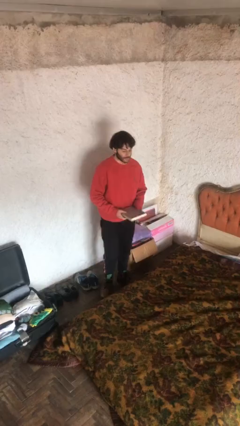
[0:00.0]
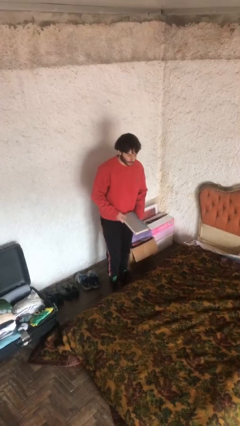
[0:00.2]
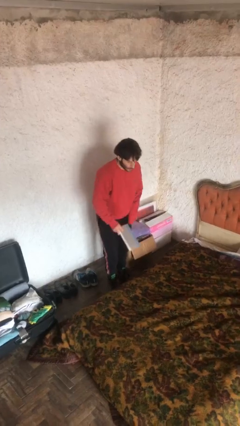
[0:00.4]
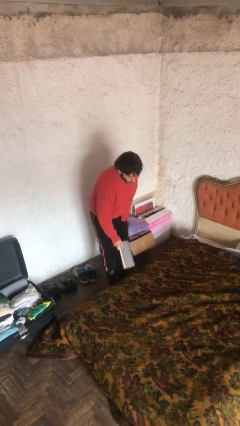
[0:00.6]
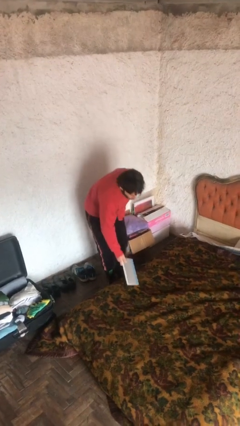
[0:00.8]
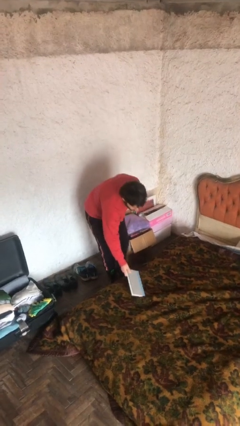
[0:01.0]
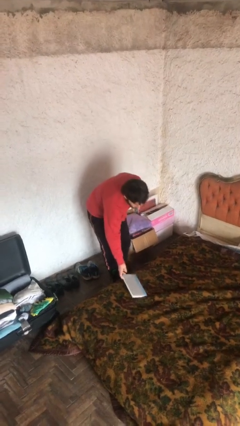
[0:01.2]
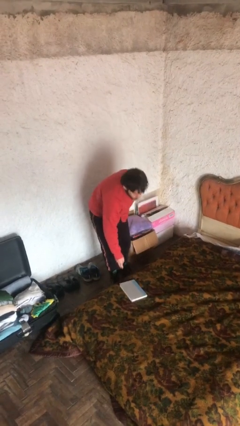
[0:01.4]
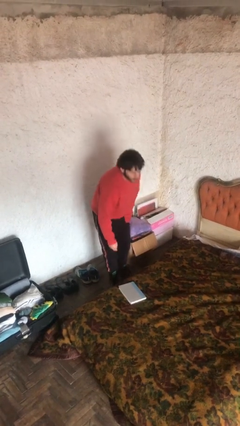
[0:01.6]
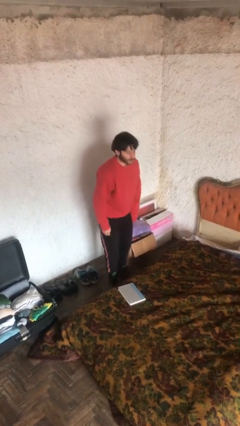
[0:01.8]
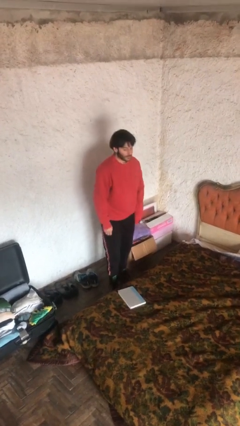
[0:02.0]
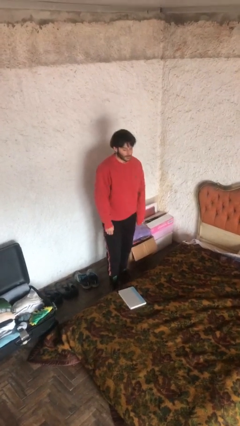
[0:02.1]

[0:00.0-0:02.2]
person puts down object on bed

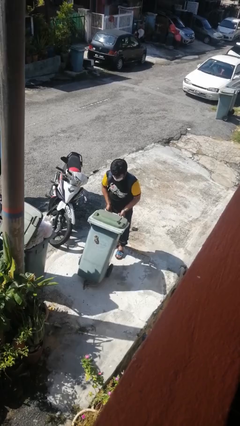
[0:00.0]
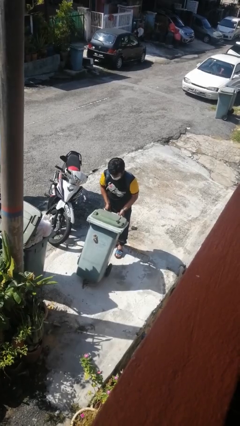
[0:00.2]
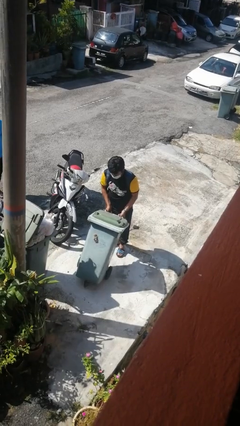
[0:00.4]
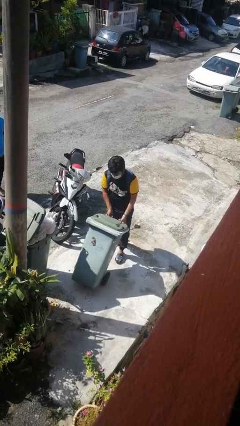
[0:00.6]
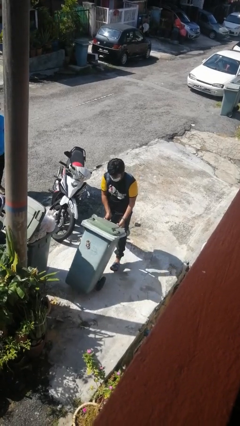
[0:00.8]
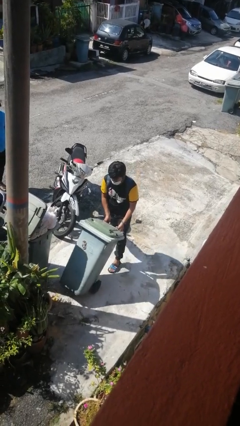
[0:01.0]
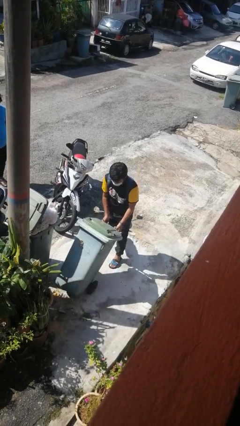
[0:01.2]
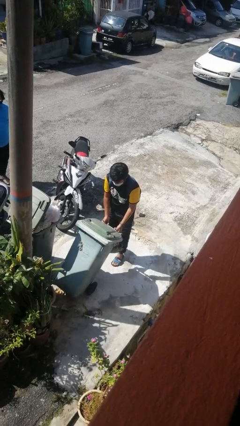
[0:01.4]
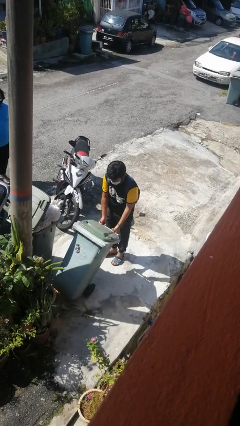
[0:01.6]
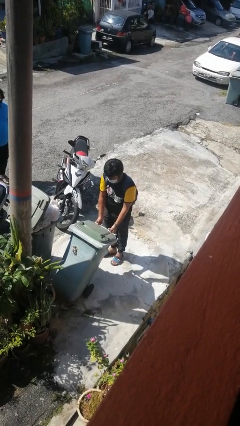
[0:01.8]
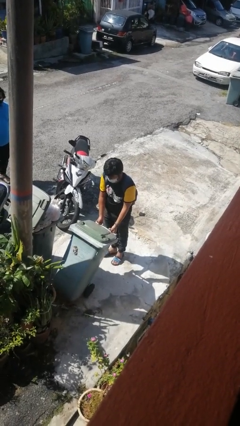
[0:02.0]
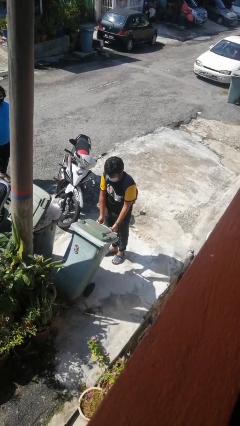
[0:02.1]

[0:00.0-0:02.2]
person pushes wheeled trashcan

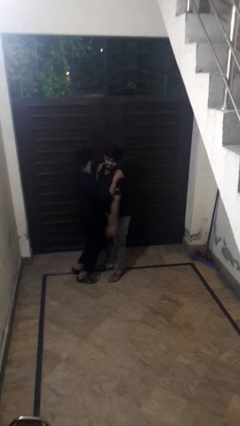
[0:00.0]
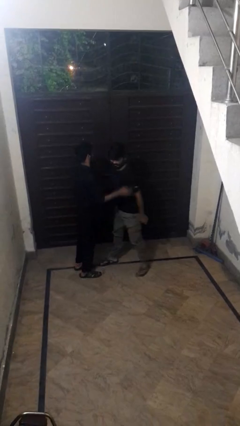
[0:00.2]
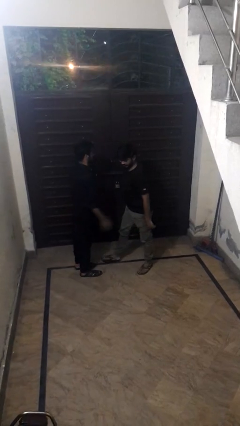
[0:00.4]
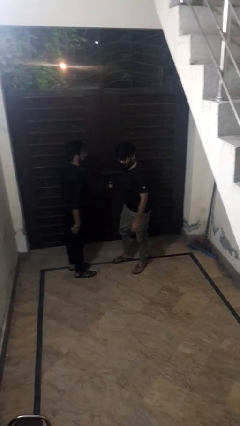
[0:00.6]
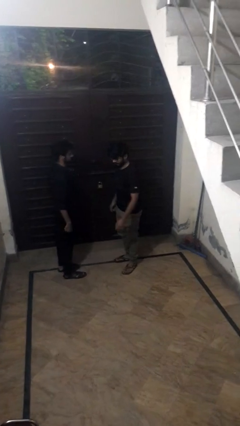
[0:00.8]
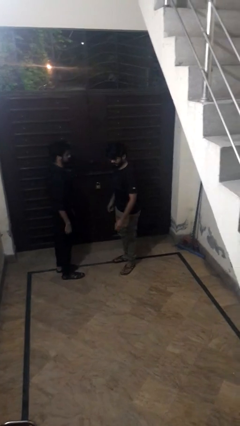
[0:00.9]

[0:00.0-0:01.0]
person puts down person

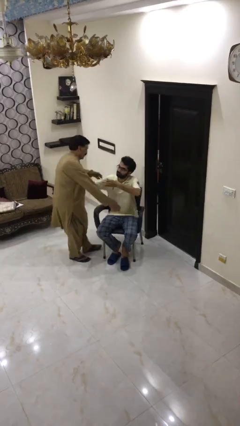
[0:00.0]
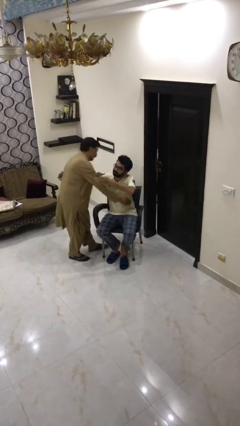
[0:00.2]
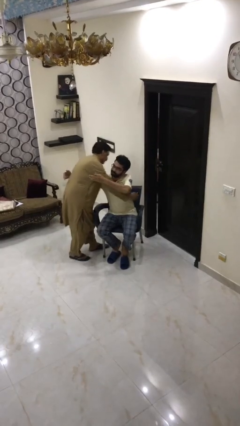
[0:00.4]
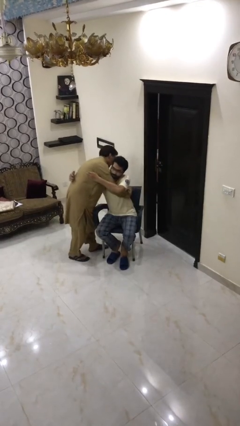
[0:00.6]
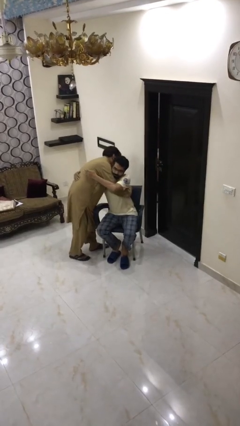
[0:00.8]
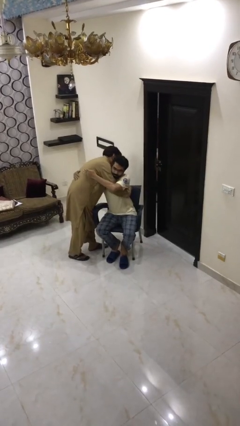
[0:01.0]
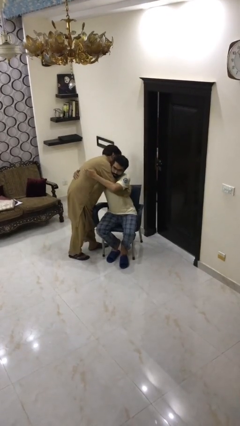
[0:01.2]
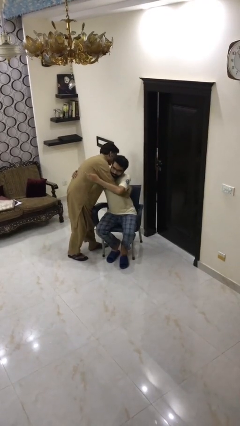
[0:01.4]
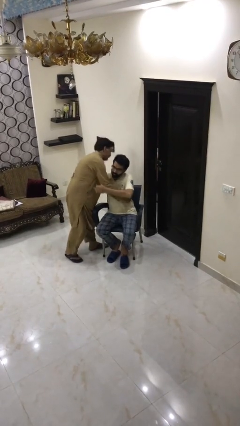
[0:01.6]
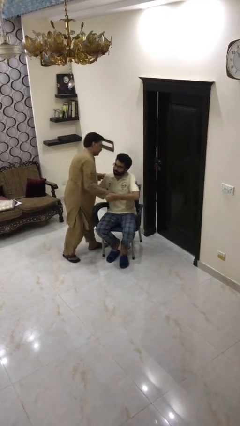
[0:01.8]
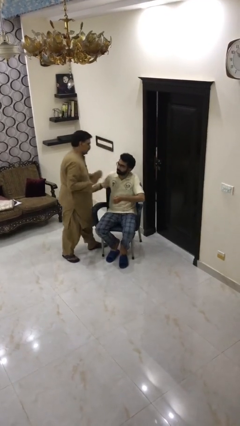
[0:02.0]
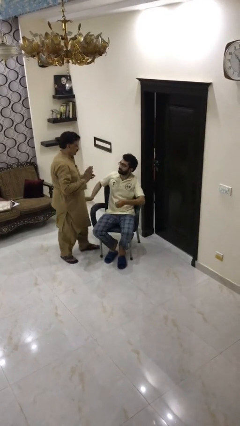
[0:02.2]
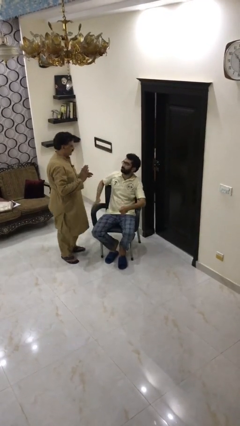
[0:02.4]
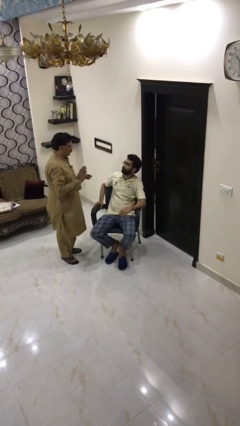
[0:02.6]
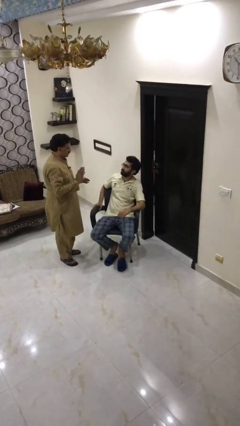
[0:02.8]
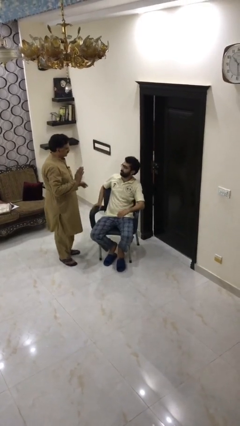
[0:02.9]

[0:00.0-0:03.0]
person embraces person

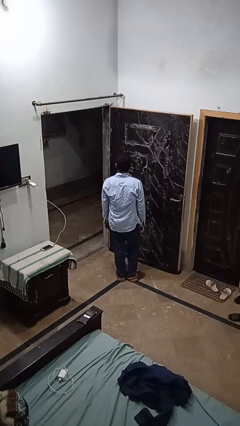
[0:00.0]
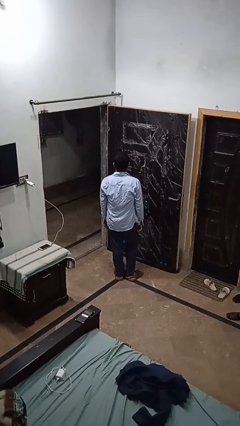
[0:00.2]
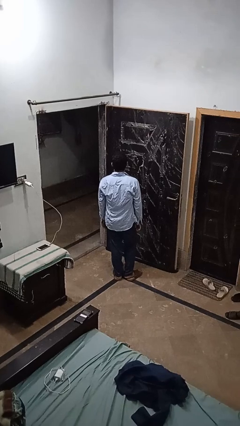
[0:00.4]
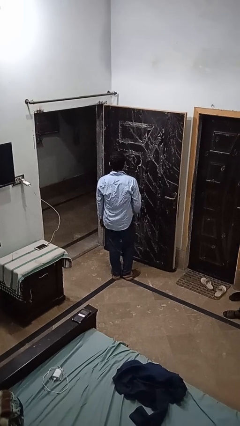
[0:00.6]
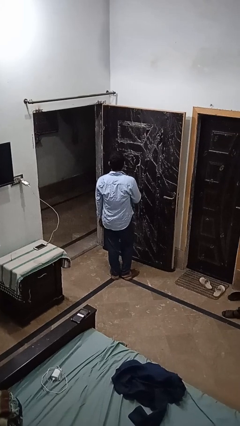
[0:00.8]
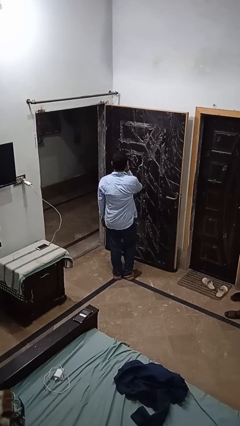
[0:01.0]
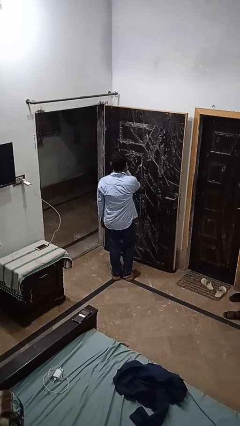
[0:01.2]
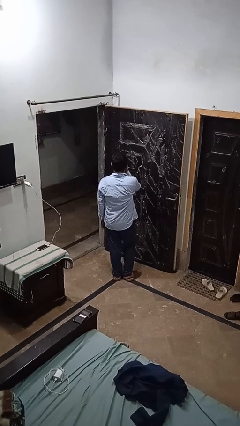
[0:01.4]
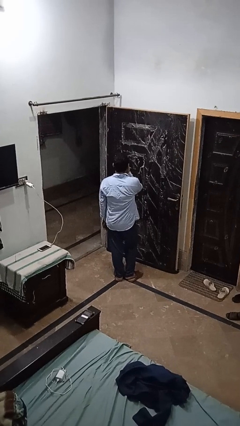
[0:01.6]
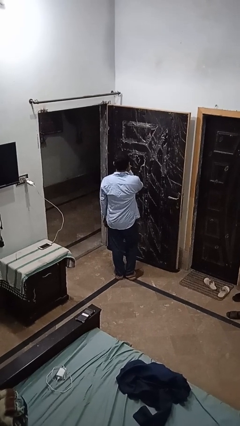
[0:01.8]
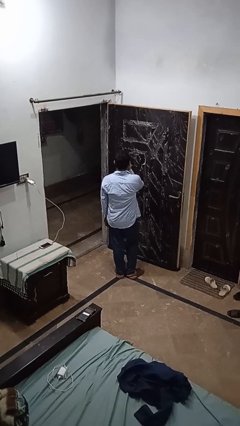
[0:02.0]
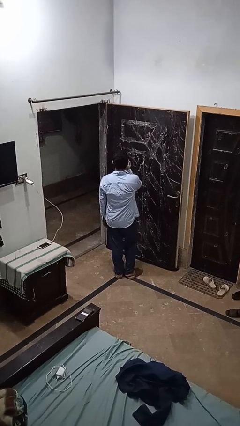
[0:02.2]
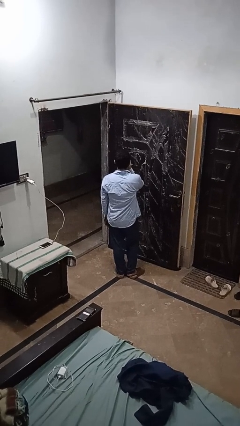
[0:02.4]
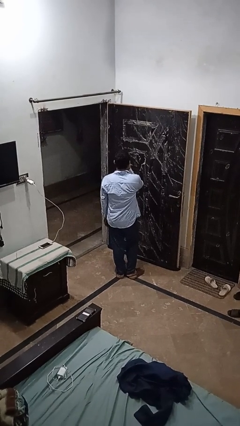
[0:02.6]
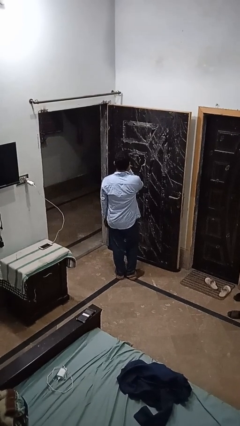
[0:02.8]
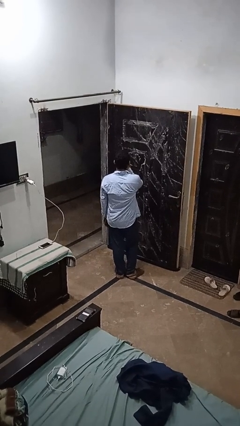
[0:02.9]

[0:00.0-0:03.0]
person licks fingers

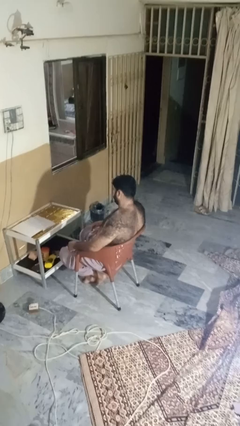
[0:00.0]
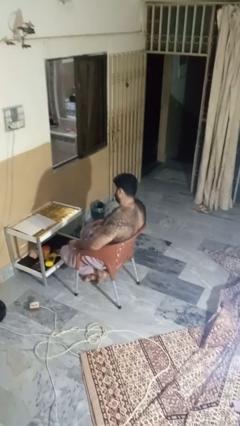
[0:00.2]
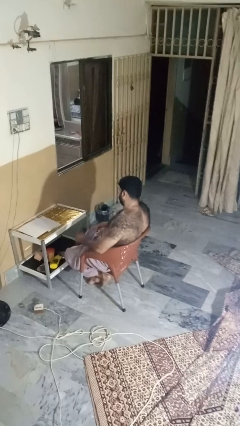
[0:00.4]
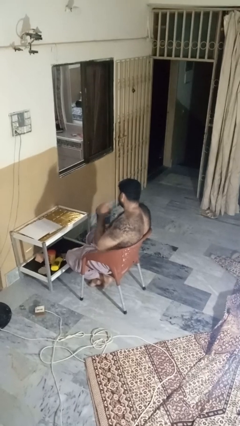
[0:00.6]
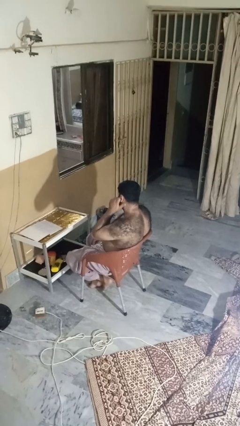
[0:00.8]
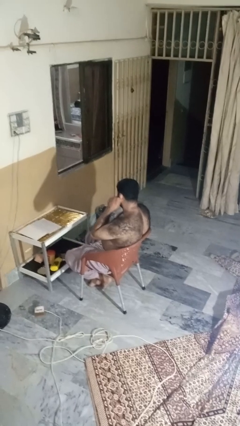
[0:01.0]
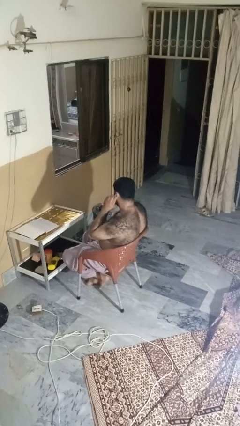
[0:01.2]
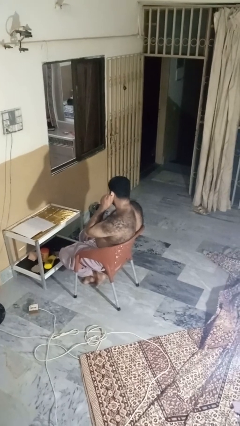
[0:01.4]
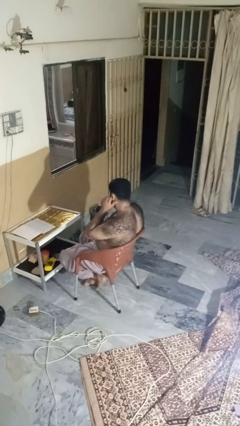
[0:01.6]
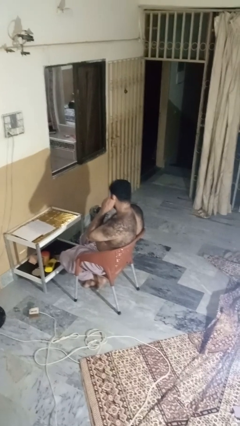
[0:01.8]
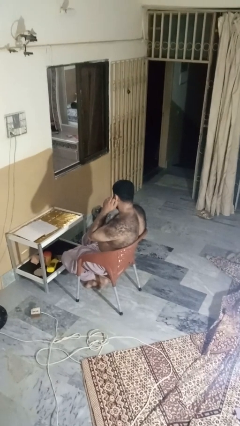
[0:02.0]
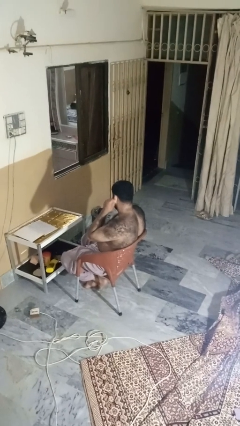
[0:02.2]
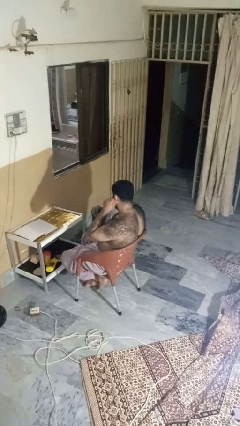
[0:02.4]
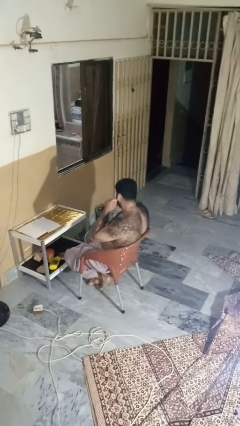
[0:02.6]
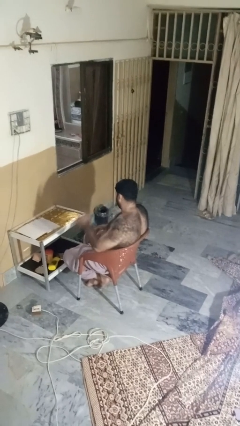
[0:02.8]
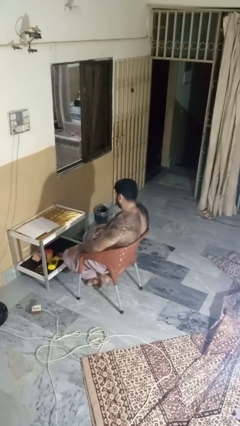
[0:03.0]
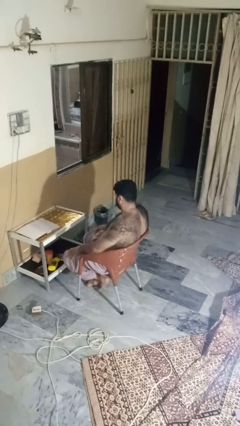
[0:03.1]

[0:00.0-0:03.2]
person touches earlobe

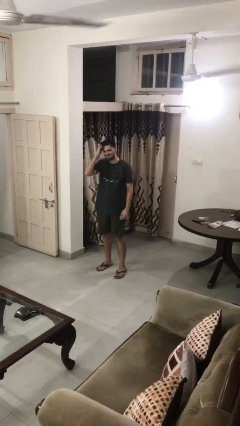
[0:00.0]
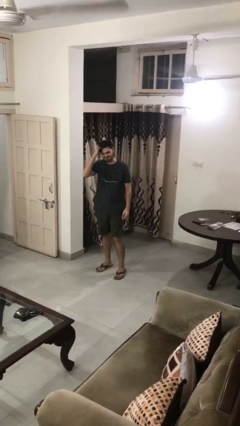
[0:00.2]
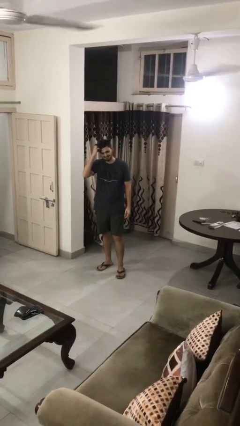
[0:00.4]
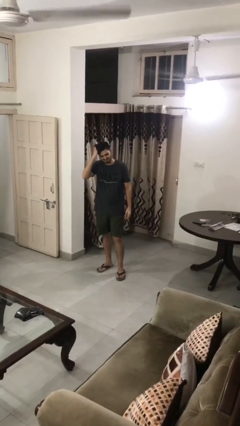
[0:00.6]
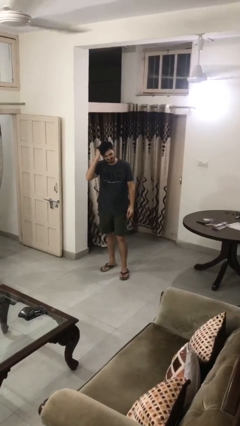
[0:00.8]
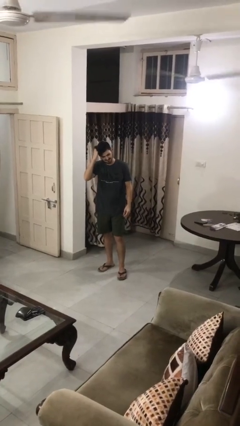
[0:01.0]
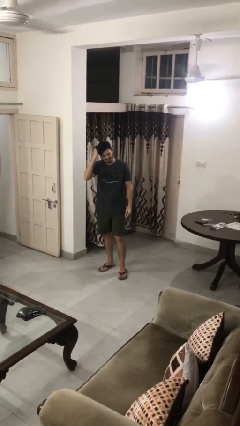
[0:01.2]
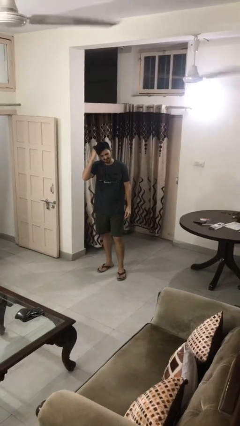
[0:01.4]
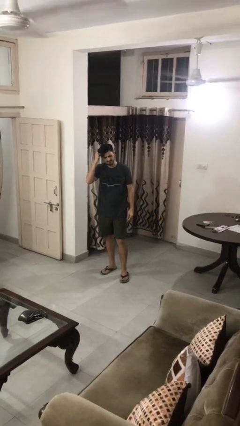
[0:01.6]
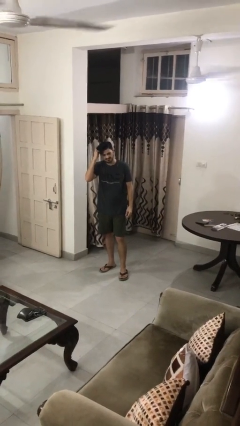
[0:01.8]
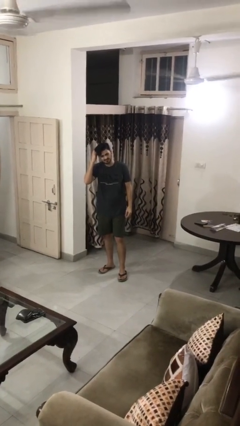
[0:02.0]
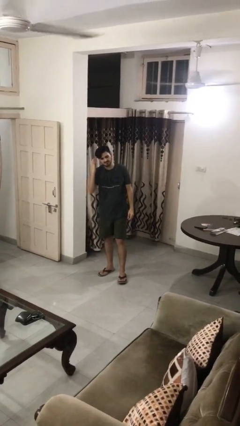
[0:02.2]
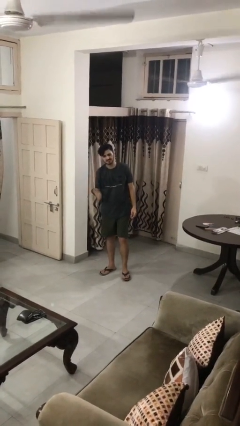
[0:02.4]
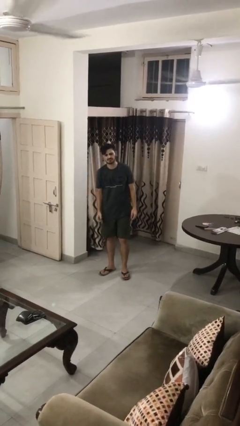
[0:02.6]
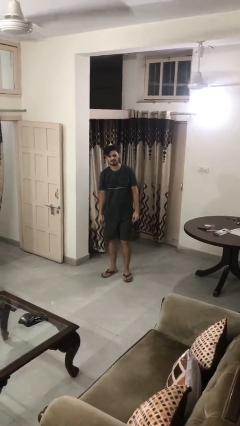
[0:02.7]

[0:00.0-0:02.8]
person scratches face
